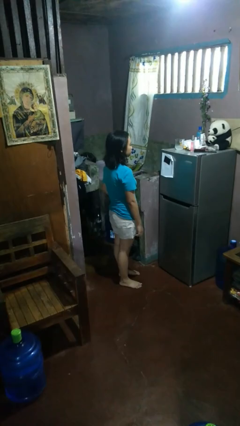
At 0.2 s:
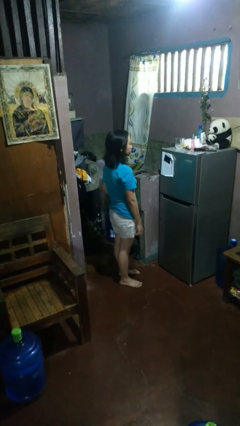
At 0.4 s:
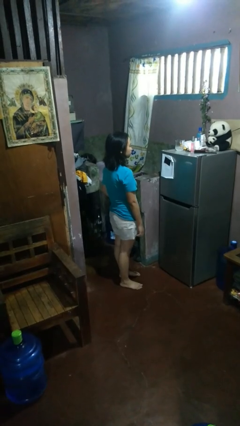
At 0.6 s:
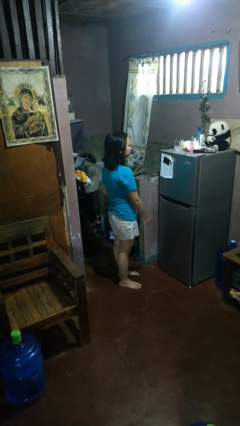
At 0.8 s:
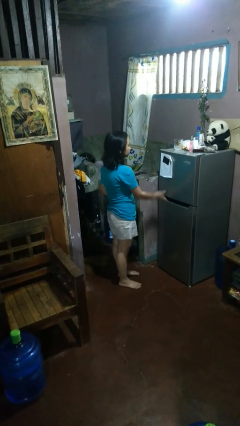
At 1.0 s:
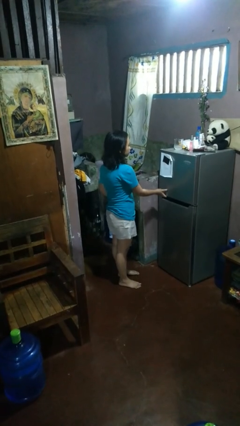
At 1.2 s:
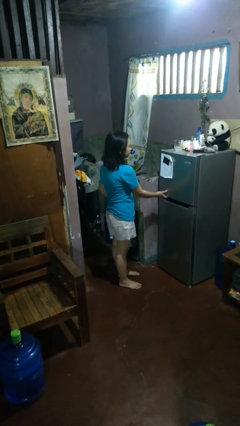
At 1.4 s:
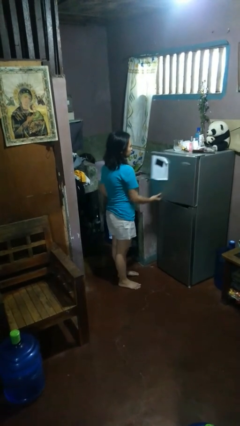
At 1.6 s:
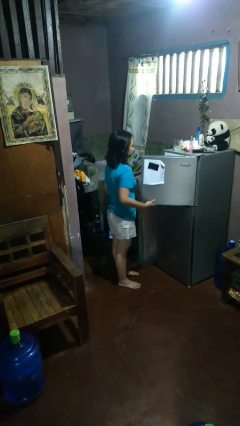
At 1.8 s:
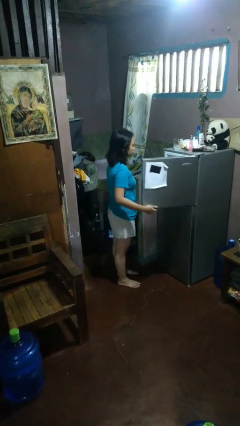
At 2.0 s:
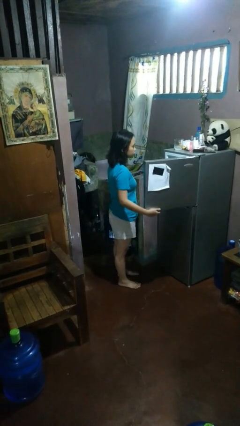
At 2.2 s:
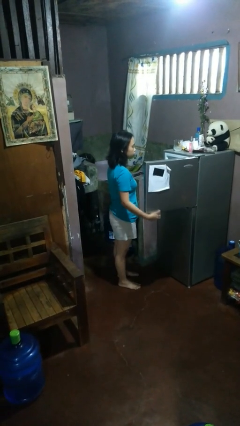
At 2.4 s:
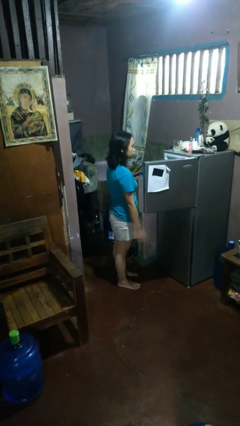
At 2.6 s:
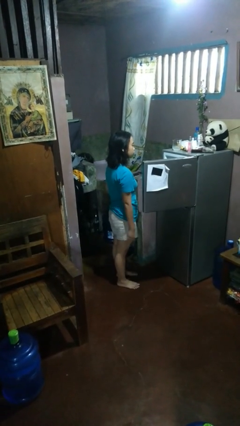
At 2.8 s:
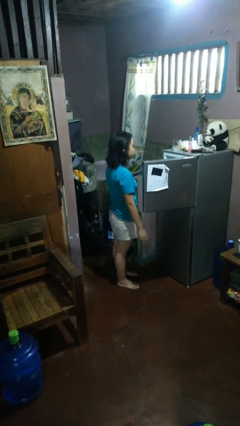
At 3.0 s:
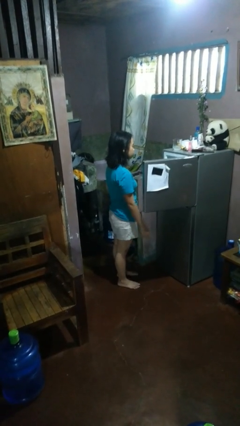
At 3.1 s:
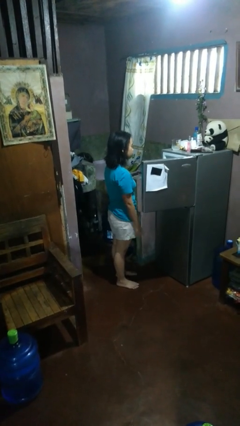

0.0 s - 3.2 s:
person opens refrigerator

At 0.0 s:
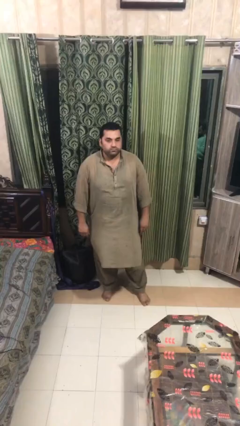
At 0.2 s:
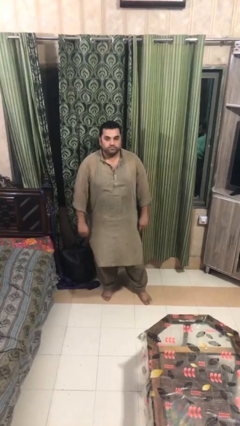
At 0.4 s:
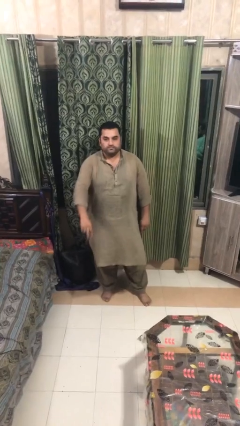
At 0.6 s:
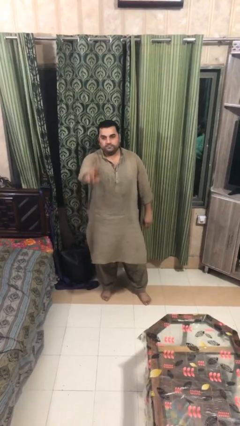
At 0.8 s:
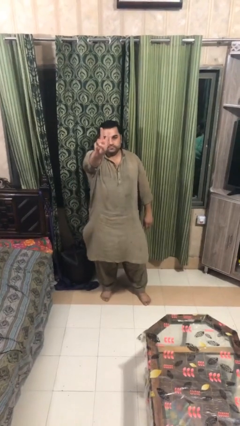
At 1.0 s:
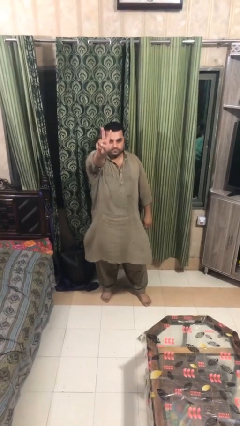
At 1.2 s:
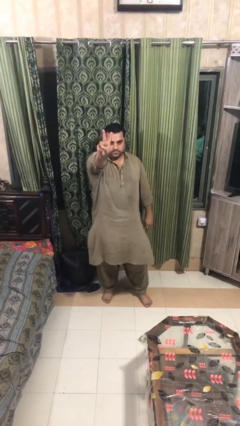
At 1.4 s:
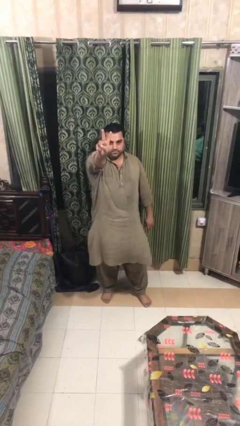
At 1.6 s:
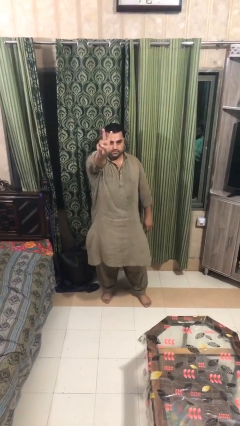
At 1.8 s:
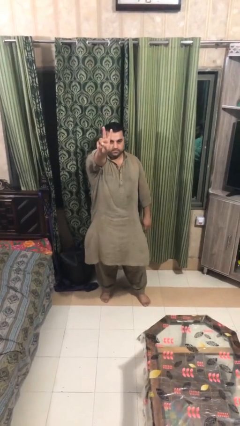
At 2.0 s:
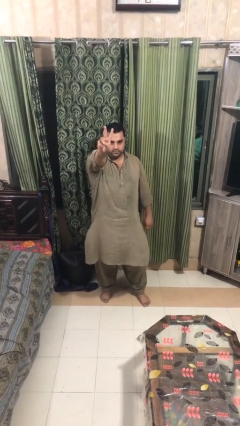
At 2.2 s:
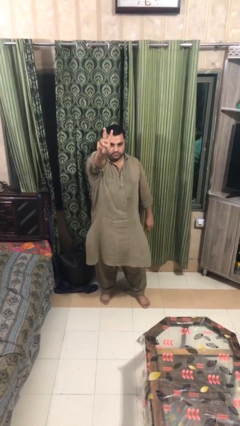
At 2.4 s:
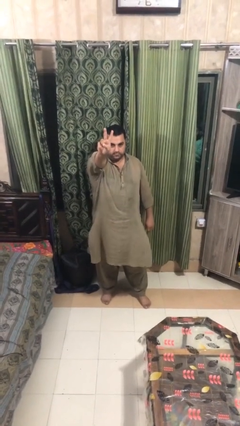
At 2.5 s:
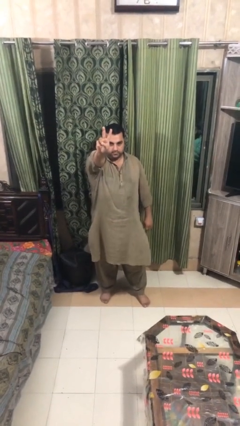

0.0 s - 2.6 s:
person gestures peace

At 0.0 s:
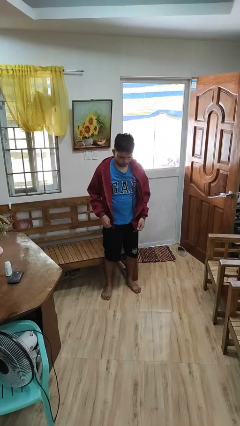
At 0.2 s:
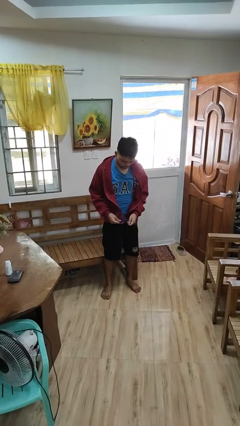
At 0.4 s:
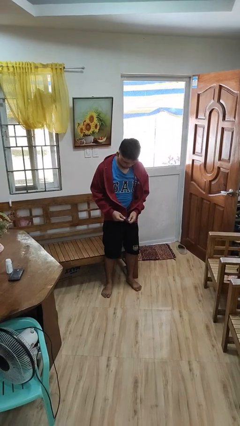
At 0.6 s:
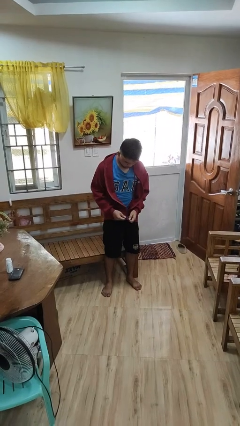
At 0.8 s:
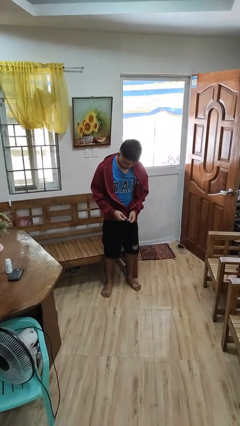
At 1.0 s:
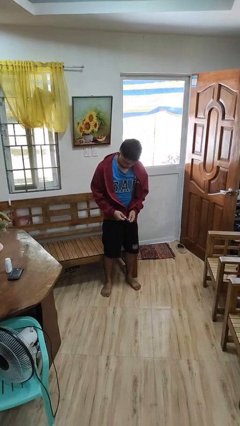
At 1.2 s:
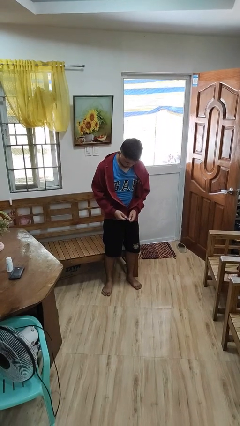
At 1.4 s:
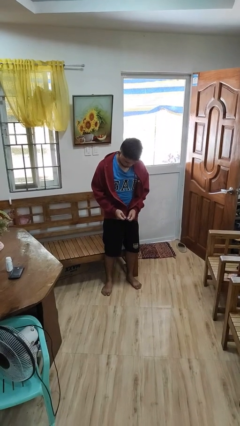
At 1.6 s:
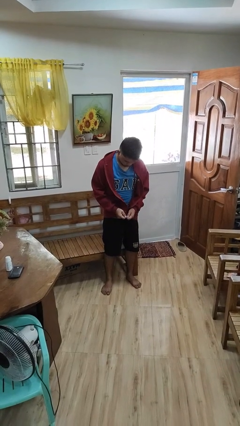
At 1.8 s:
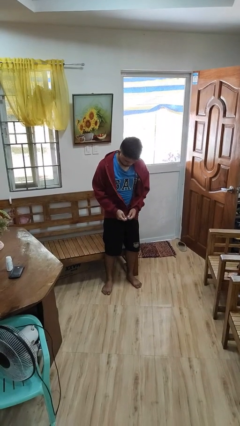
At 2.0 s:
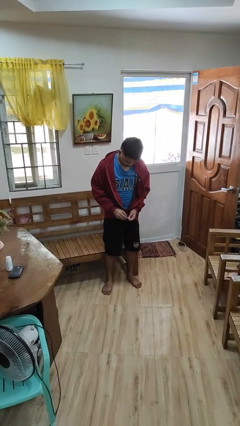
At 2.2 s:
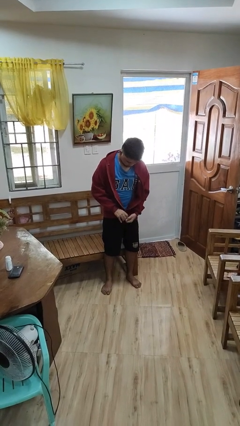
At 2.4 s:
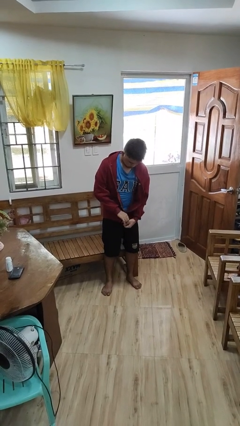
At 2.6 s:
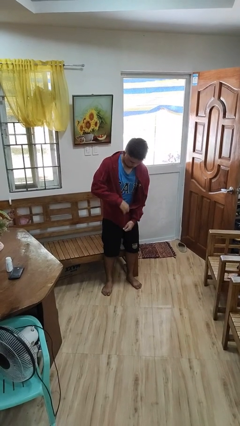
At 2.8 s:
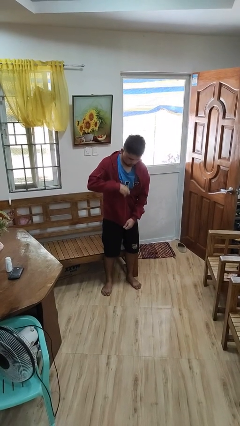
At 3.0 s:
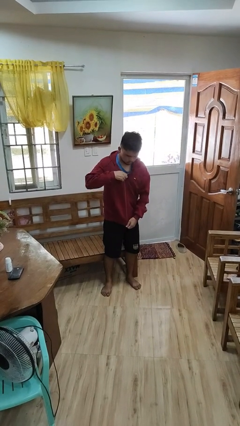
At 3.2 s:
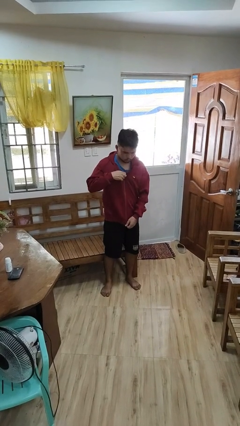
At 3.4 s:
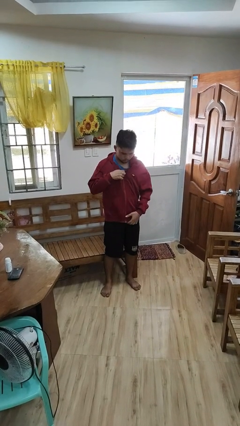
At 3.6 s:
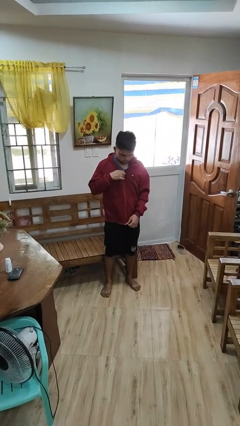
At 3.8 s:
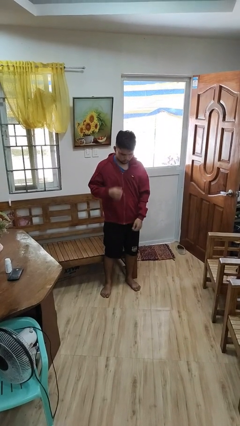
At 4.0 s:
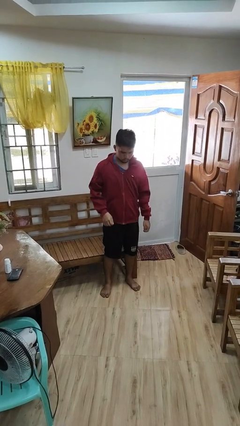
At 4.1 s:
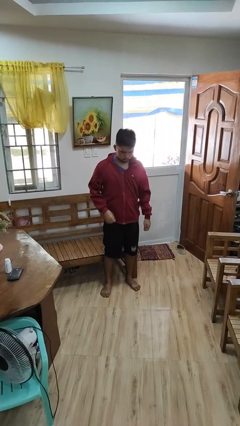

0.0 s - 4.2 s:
person zips up jacket

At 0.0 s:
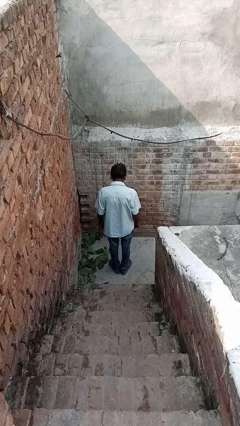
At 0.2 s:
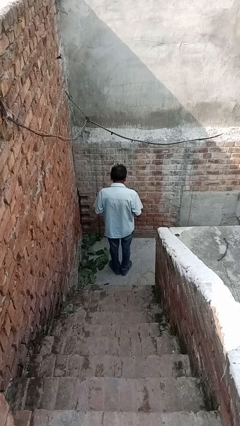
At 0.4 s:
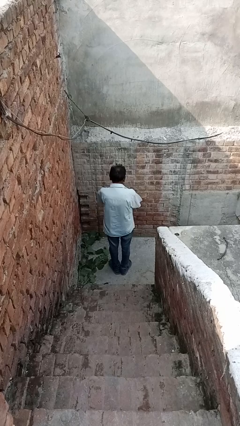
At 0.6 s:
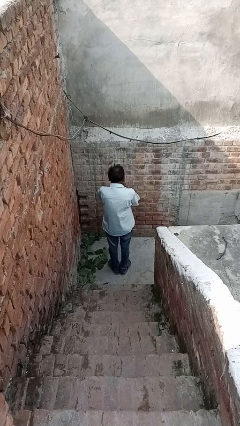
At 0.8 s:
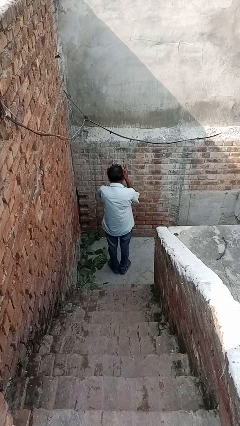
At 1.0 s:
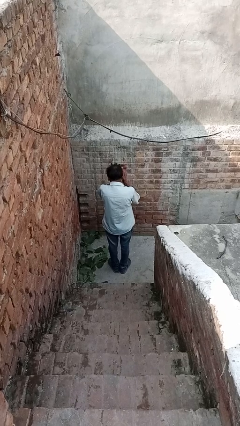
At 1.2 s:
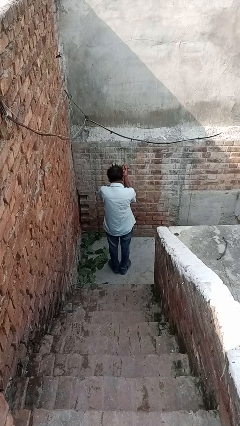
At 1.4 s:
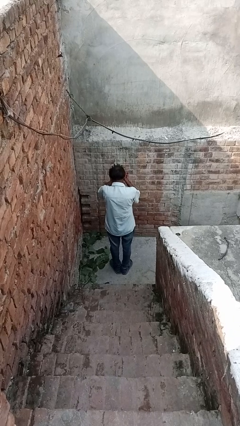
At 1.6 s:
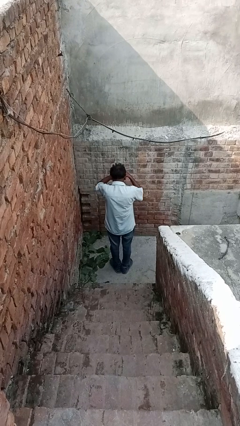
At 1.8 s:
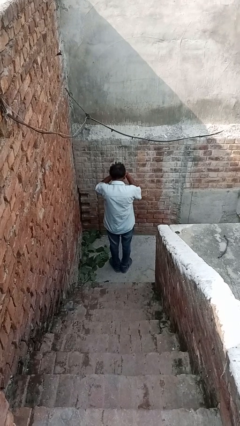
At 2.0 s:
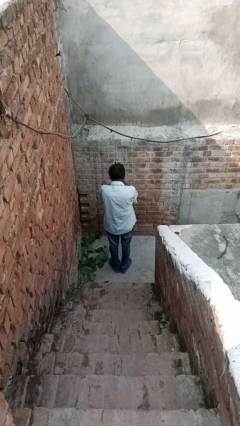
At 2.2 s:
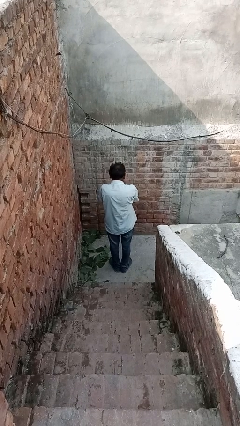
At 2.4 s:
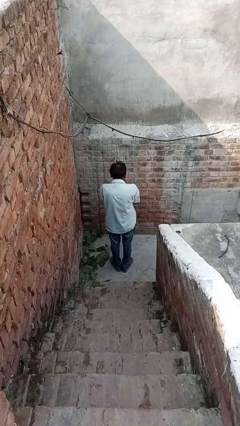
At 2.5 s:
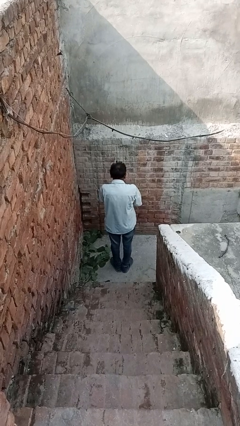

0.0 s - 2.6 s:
person blows into hands

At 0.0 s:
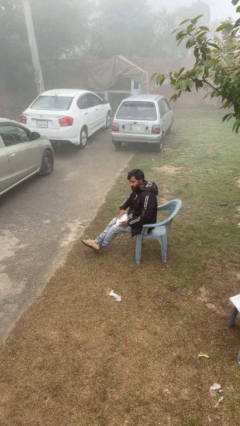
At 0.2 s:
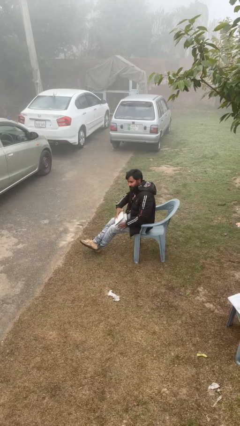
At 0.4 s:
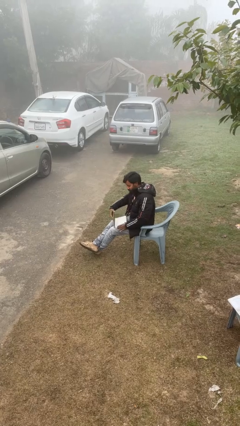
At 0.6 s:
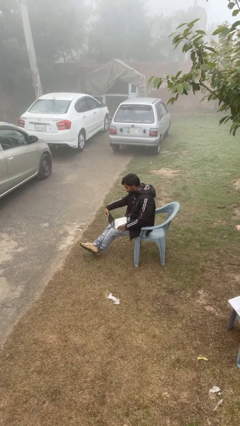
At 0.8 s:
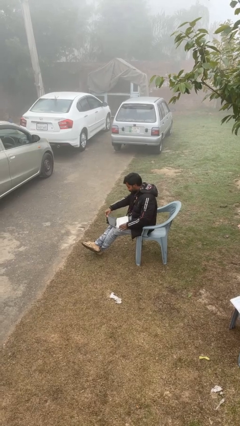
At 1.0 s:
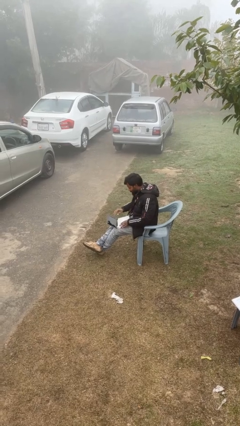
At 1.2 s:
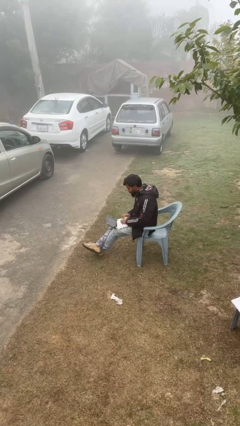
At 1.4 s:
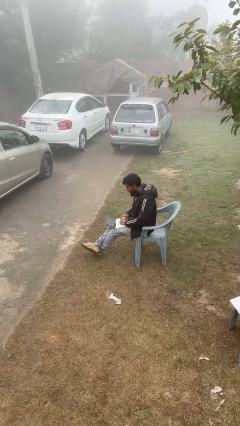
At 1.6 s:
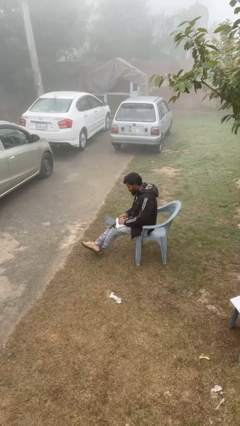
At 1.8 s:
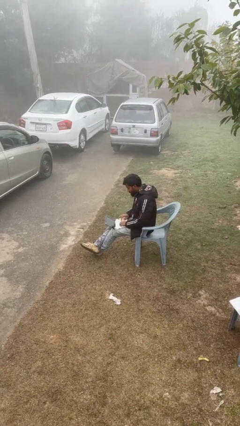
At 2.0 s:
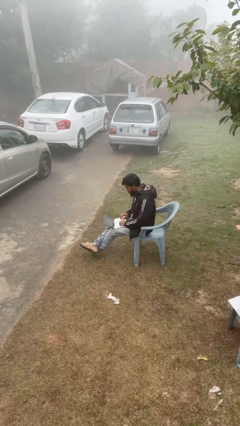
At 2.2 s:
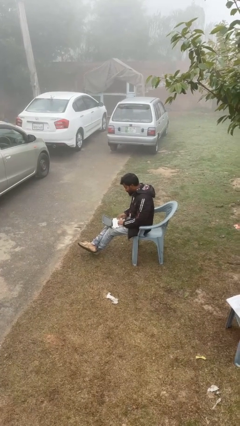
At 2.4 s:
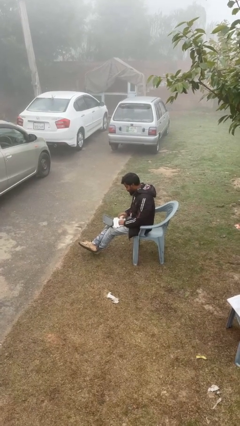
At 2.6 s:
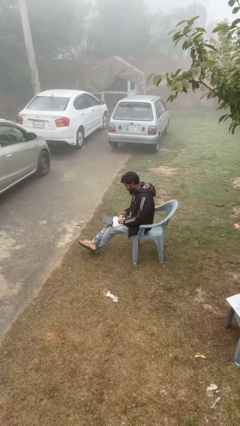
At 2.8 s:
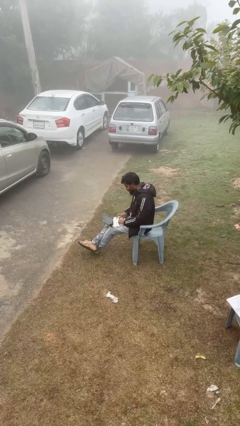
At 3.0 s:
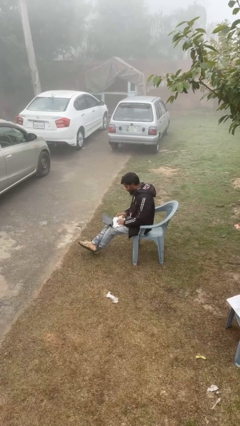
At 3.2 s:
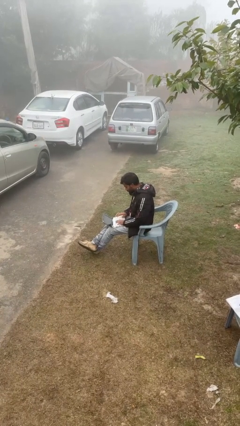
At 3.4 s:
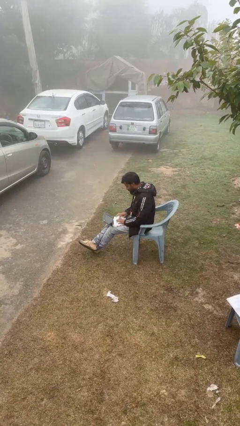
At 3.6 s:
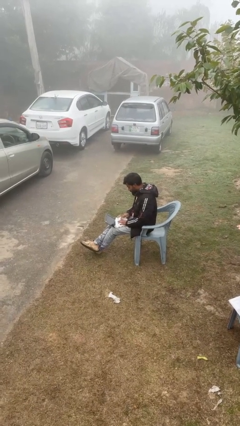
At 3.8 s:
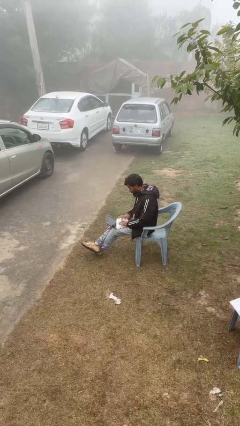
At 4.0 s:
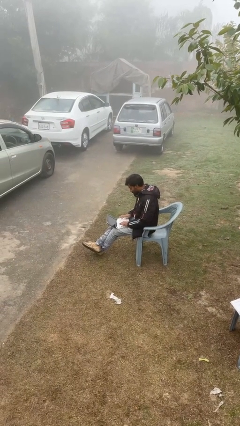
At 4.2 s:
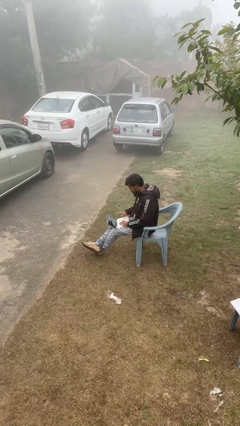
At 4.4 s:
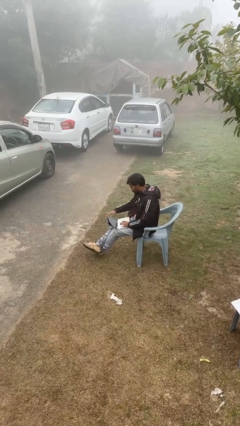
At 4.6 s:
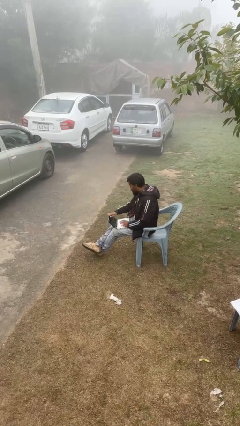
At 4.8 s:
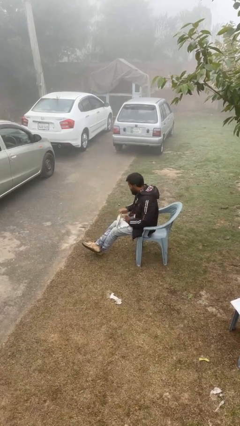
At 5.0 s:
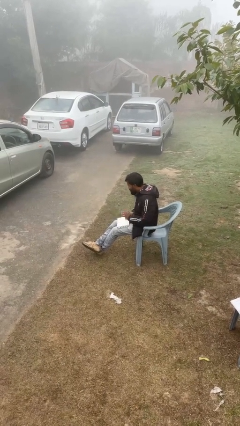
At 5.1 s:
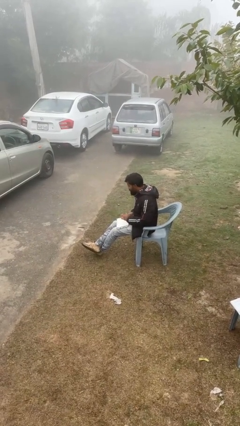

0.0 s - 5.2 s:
person interacts with laptop
